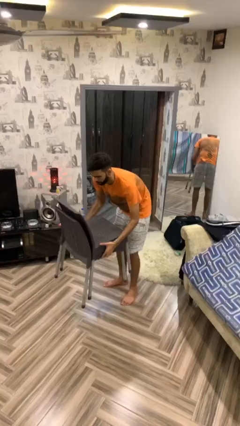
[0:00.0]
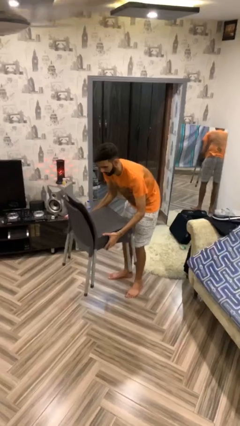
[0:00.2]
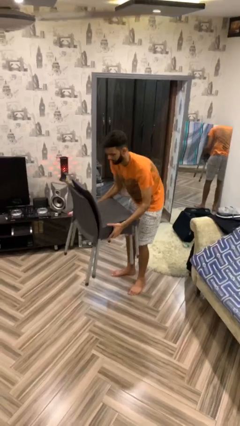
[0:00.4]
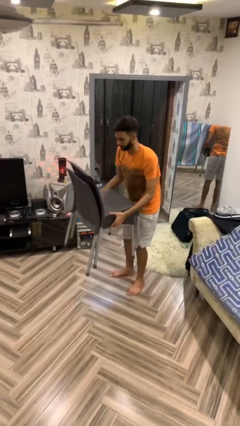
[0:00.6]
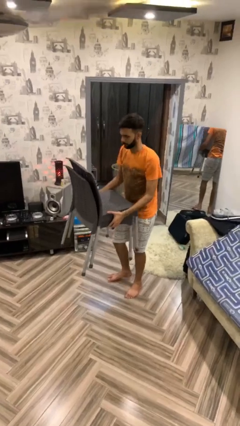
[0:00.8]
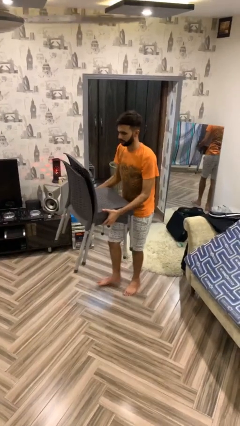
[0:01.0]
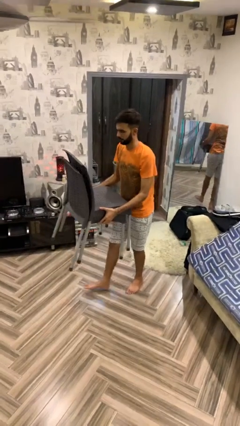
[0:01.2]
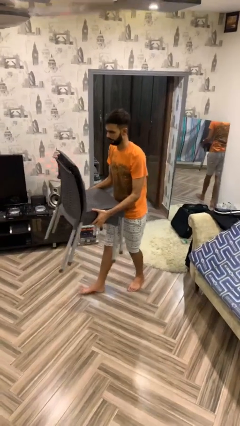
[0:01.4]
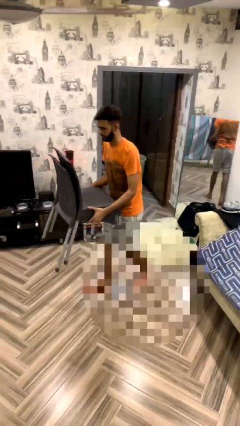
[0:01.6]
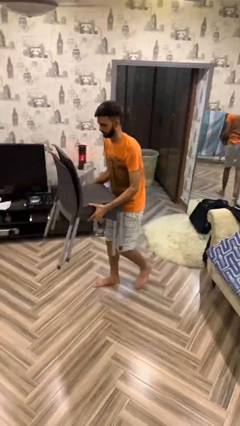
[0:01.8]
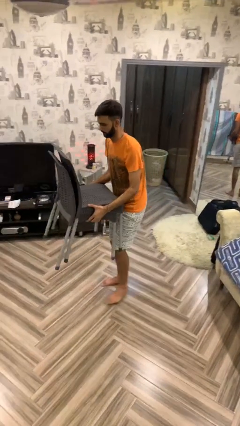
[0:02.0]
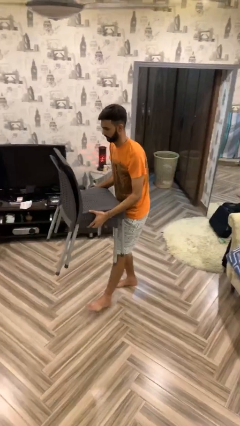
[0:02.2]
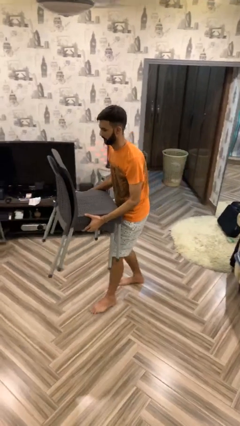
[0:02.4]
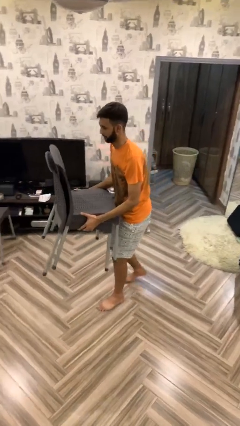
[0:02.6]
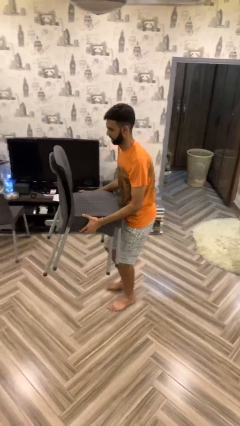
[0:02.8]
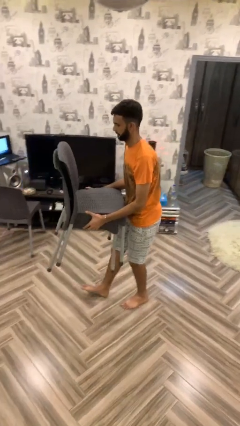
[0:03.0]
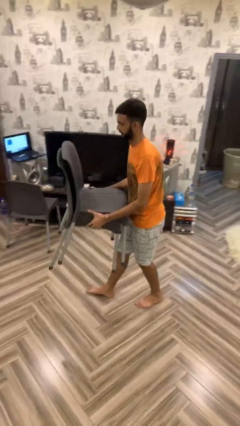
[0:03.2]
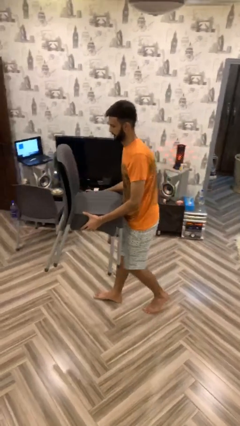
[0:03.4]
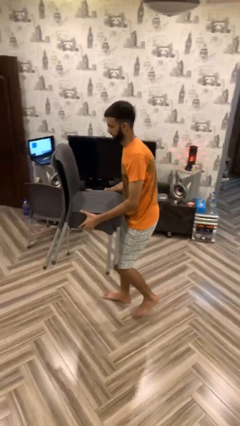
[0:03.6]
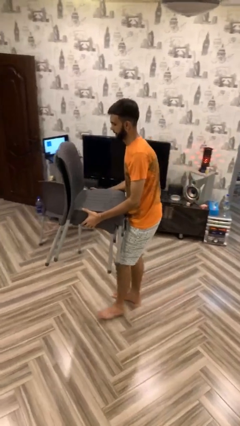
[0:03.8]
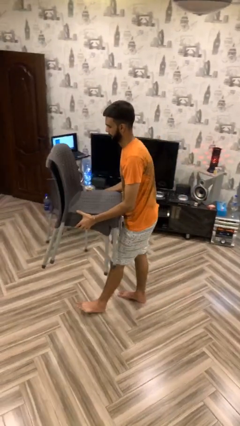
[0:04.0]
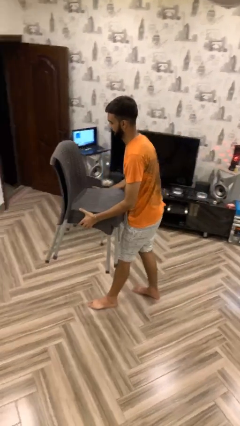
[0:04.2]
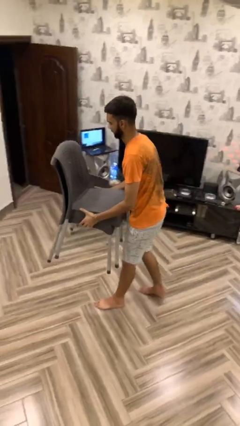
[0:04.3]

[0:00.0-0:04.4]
person carries heavy object

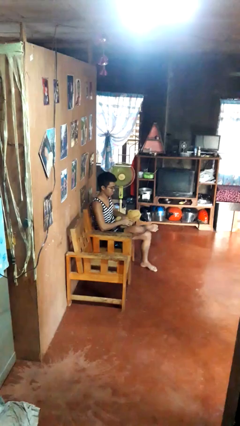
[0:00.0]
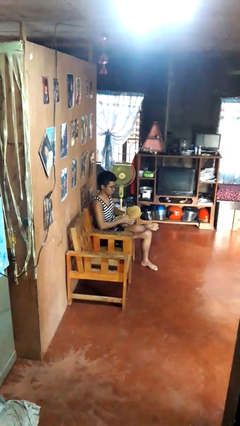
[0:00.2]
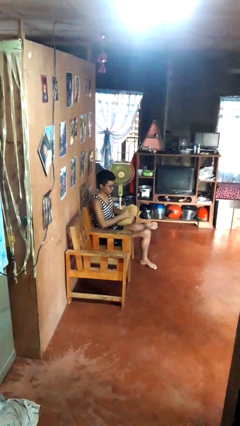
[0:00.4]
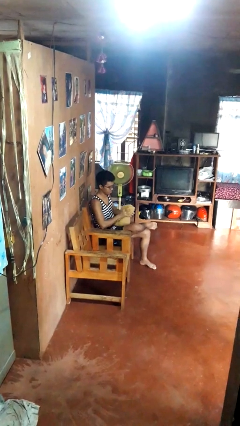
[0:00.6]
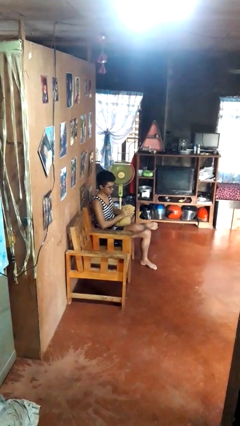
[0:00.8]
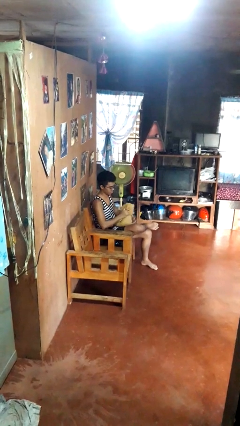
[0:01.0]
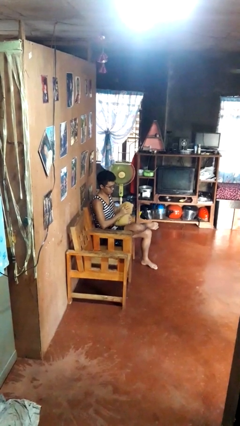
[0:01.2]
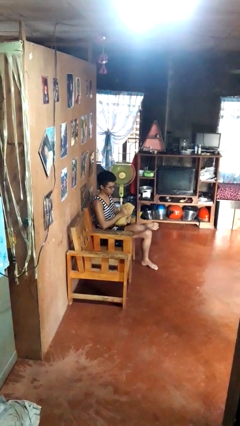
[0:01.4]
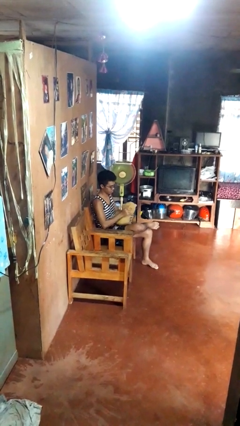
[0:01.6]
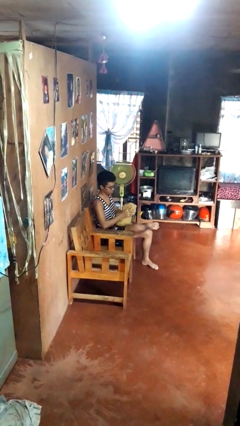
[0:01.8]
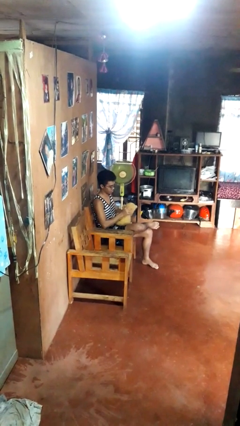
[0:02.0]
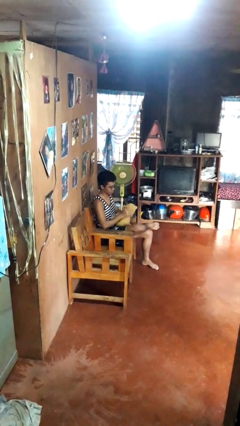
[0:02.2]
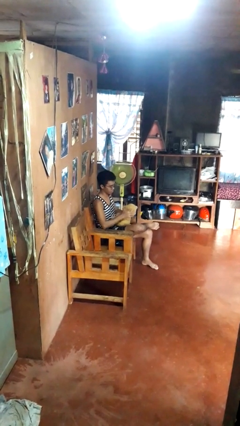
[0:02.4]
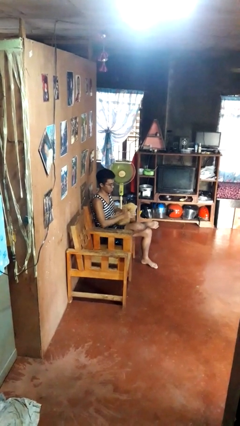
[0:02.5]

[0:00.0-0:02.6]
person squeezes object

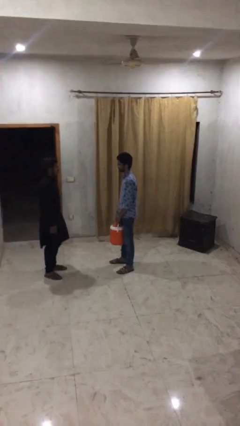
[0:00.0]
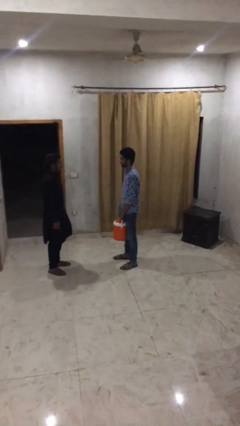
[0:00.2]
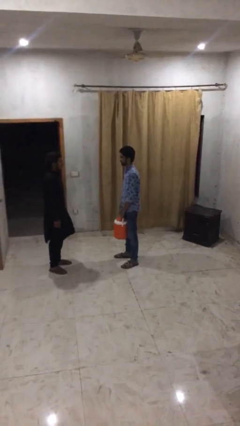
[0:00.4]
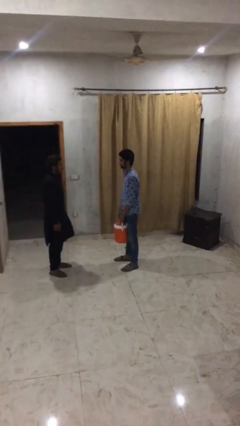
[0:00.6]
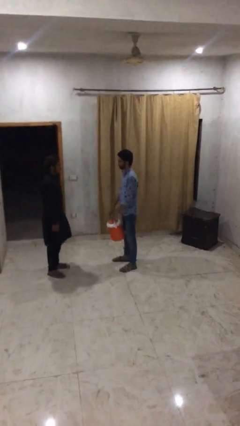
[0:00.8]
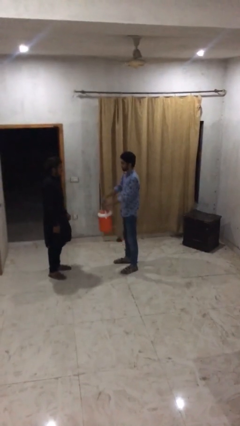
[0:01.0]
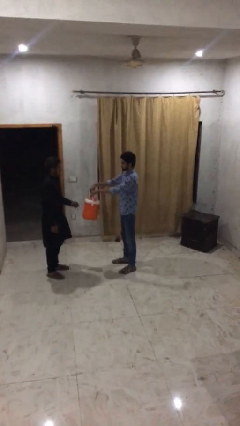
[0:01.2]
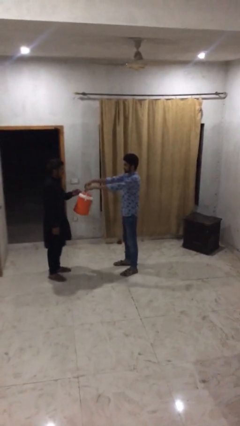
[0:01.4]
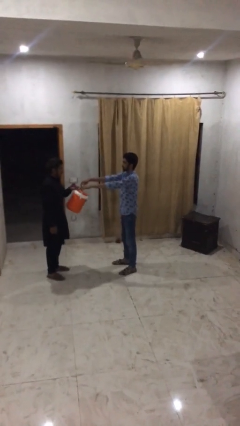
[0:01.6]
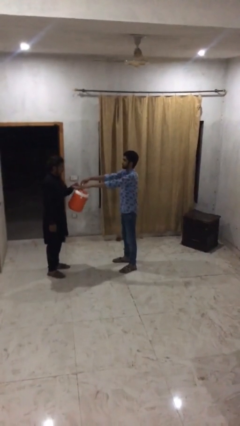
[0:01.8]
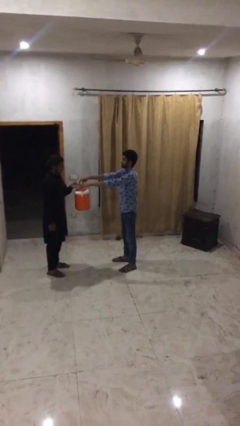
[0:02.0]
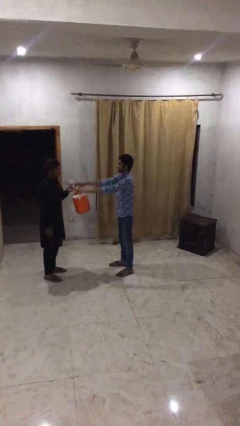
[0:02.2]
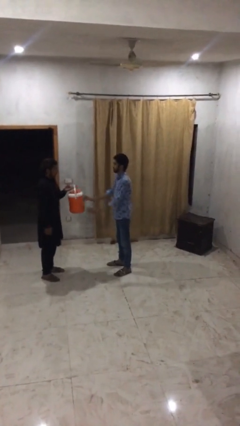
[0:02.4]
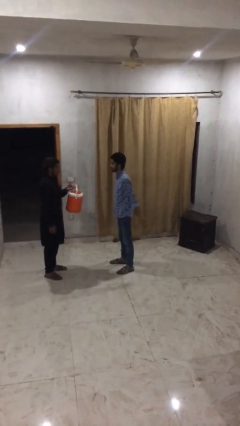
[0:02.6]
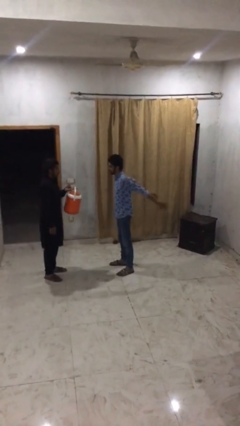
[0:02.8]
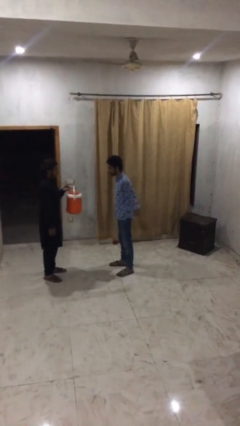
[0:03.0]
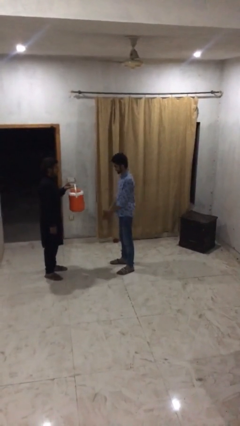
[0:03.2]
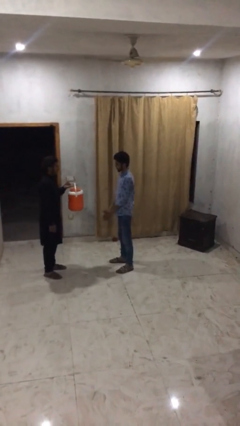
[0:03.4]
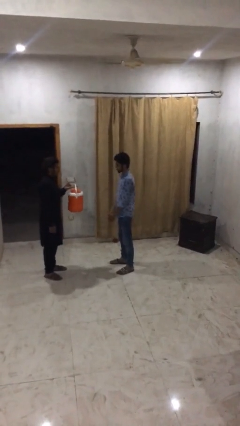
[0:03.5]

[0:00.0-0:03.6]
person transfers object to person

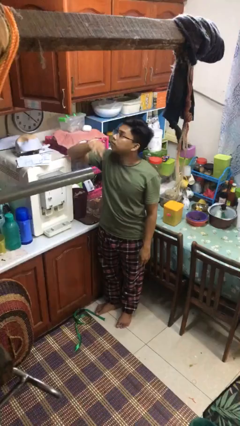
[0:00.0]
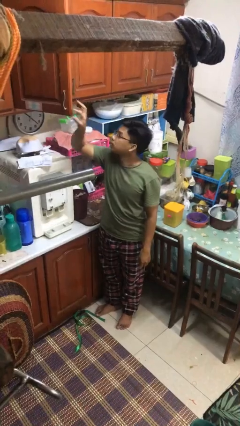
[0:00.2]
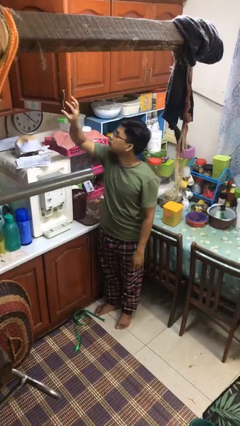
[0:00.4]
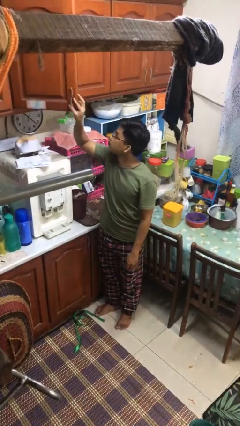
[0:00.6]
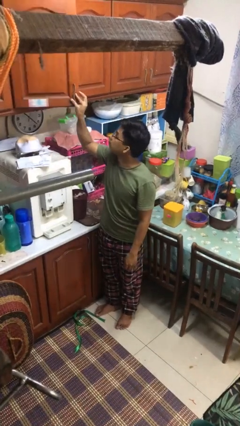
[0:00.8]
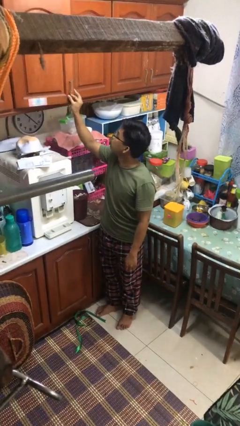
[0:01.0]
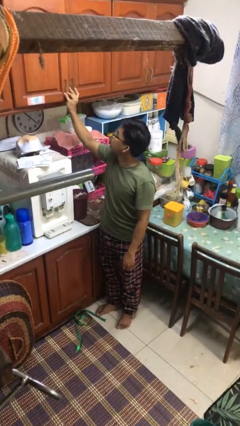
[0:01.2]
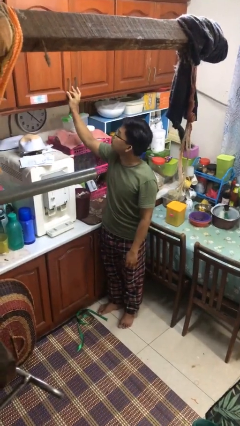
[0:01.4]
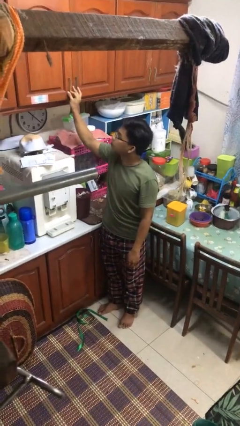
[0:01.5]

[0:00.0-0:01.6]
person closes kitchen drawer

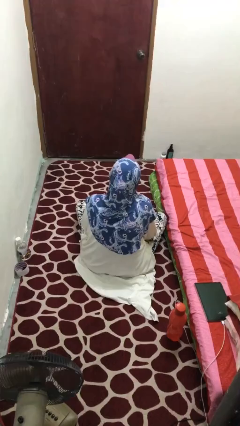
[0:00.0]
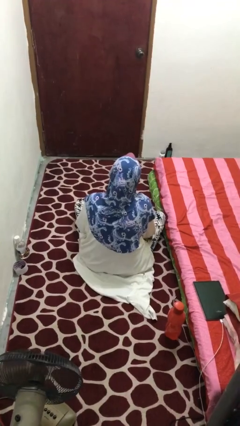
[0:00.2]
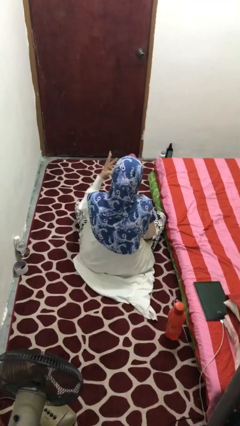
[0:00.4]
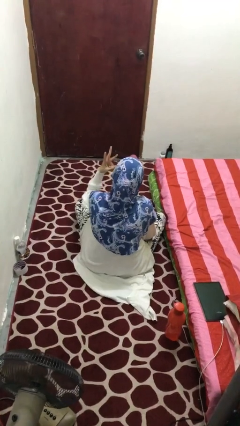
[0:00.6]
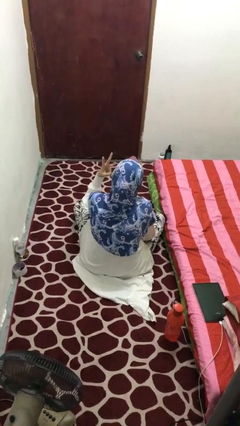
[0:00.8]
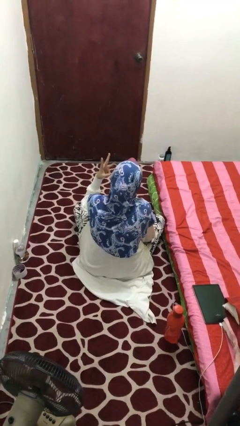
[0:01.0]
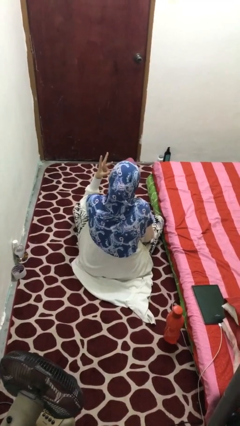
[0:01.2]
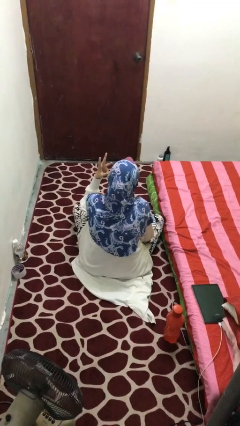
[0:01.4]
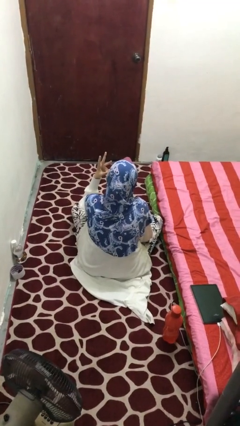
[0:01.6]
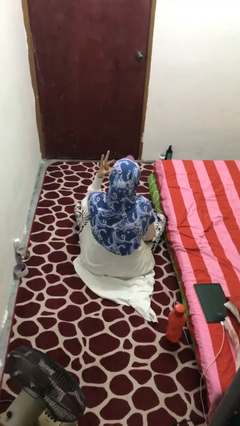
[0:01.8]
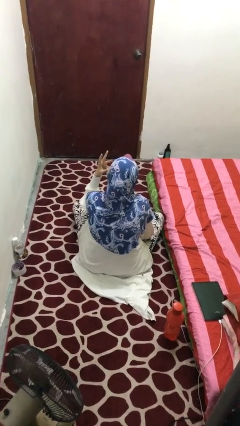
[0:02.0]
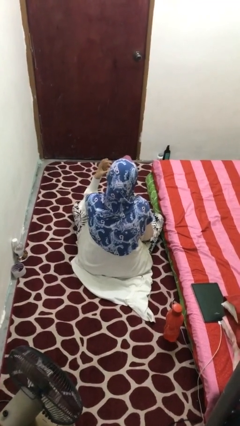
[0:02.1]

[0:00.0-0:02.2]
person gestures number three

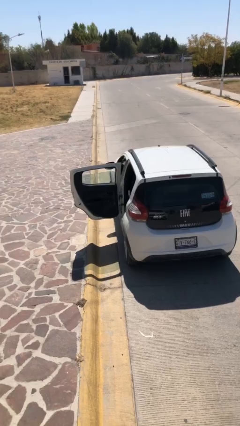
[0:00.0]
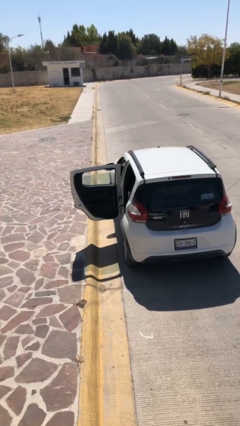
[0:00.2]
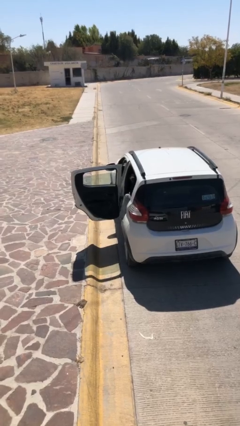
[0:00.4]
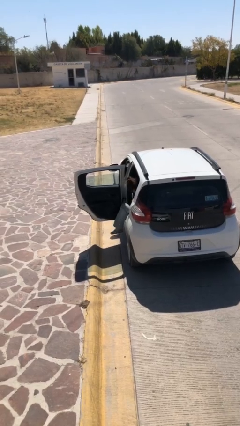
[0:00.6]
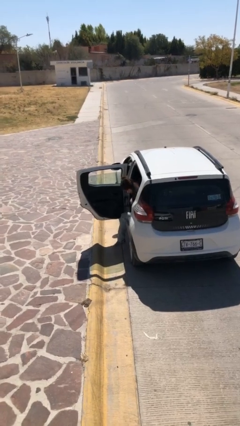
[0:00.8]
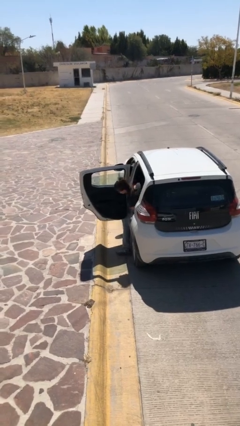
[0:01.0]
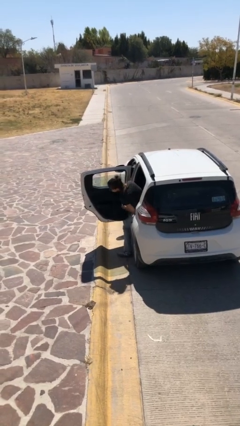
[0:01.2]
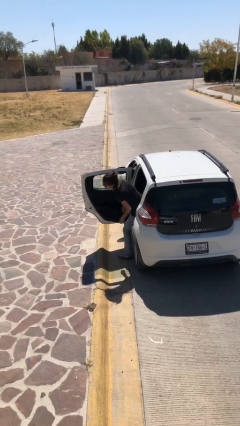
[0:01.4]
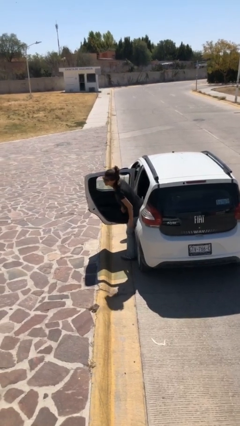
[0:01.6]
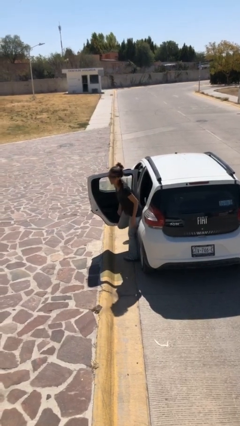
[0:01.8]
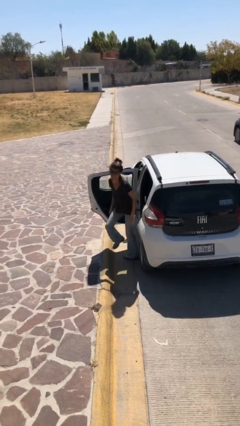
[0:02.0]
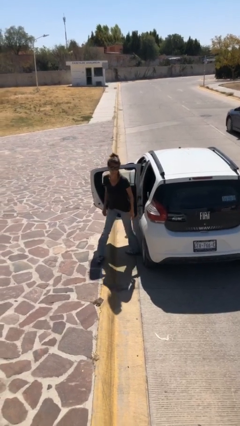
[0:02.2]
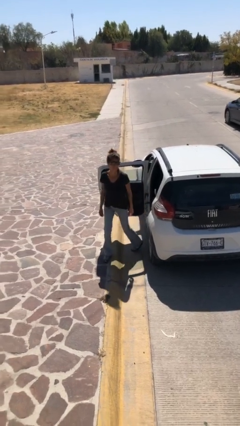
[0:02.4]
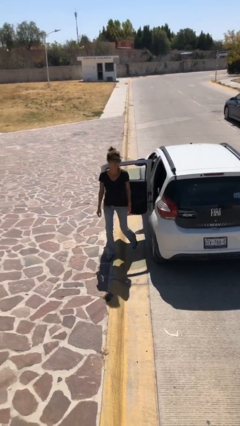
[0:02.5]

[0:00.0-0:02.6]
person exits car

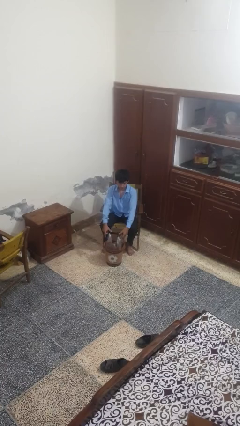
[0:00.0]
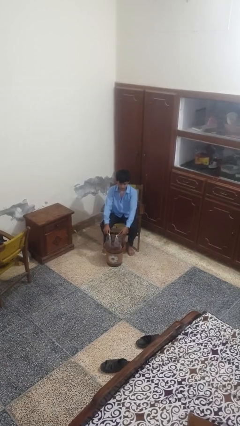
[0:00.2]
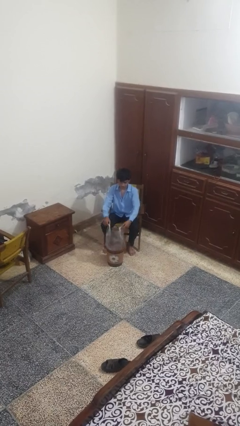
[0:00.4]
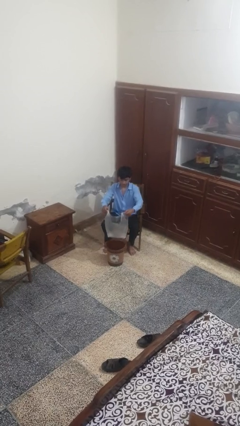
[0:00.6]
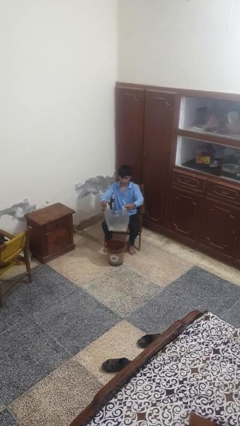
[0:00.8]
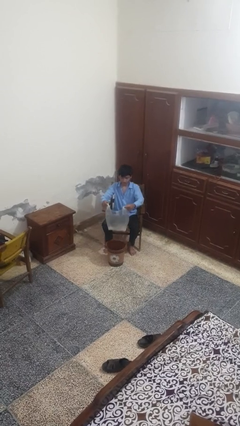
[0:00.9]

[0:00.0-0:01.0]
person removes trashbag from trashcan
